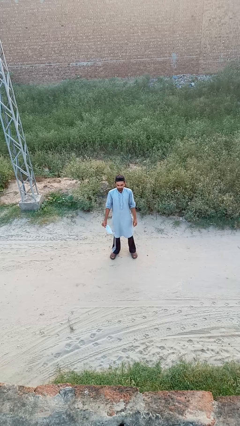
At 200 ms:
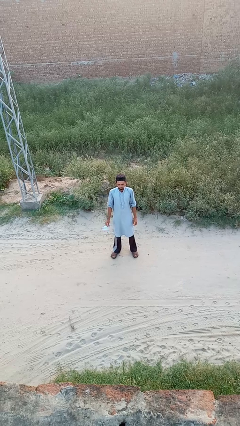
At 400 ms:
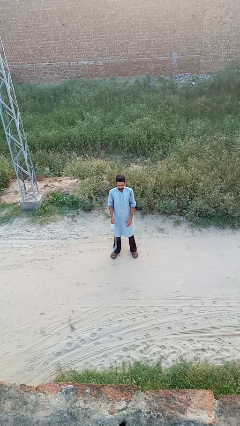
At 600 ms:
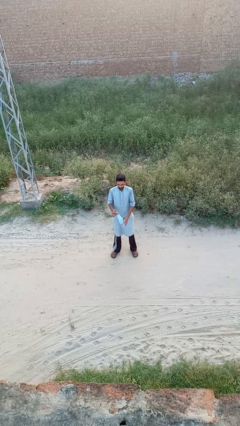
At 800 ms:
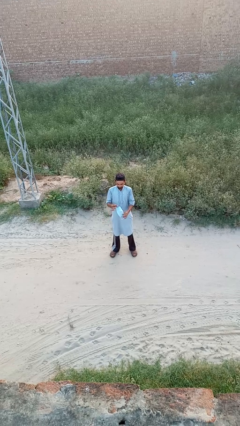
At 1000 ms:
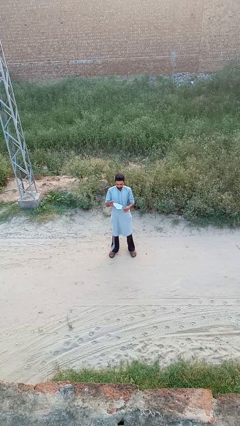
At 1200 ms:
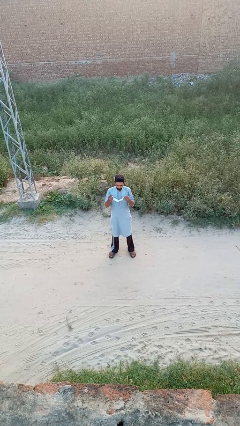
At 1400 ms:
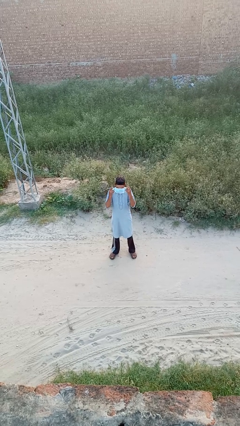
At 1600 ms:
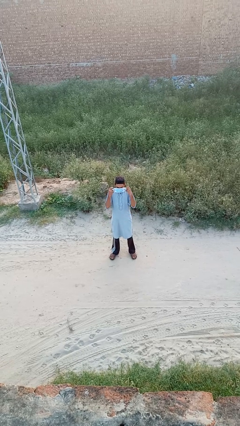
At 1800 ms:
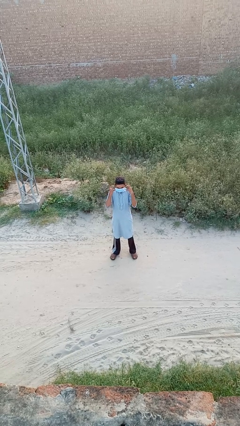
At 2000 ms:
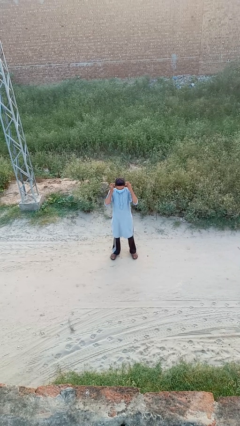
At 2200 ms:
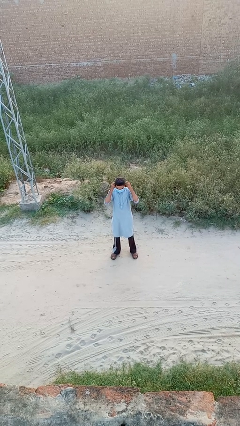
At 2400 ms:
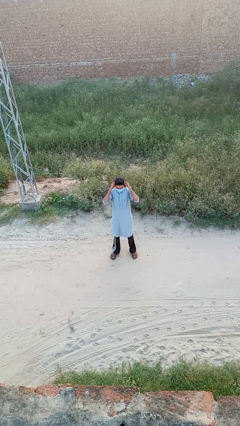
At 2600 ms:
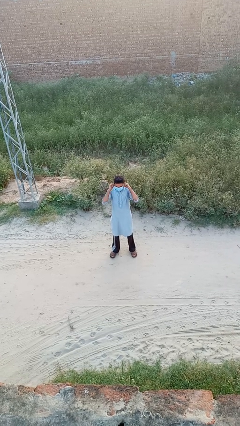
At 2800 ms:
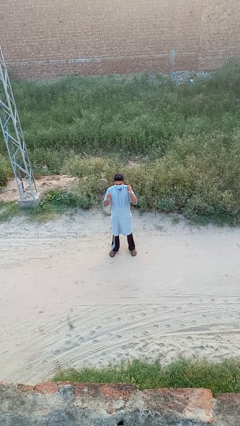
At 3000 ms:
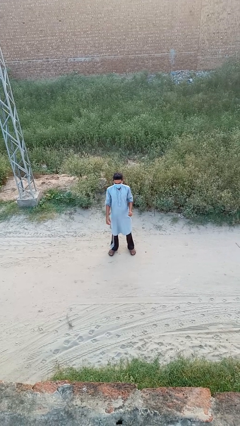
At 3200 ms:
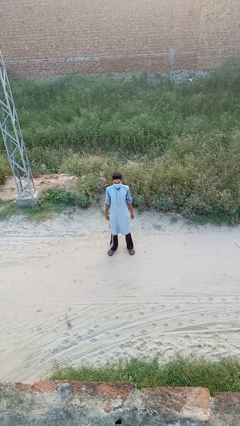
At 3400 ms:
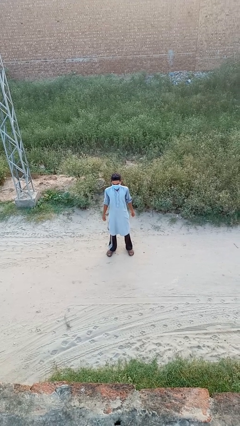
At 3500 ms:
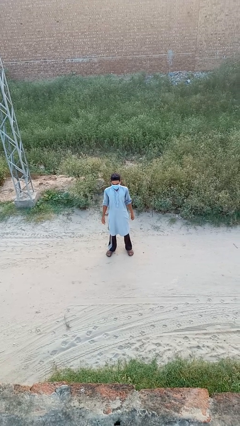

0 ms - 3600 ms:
person puts on facemask

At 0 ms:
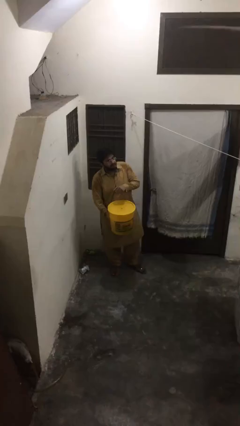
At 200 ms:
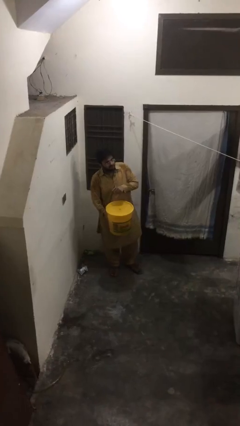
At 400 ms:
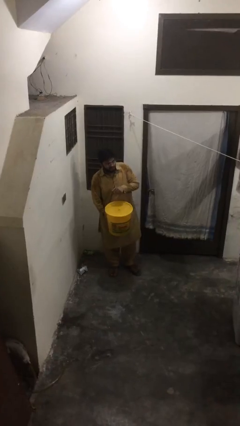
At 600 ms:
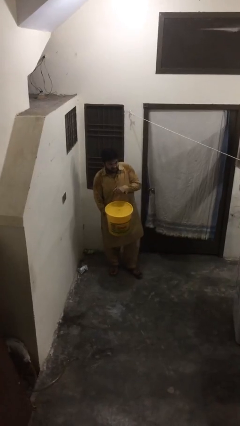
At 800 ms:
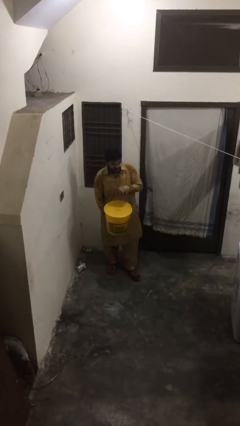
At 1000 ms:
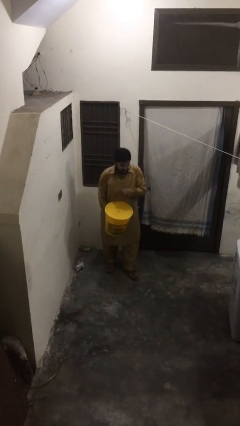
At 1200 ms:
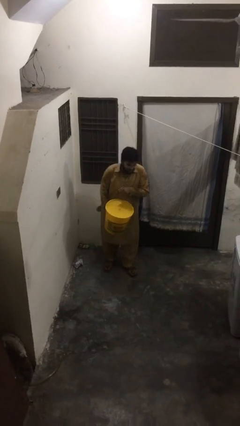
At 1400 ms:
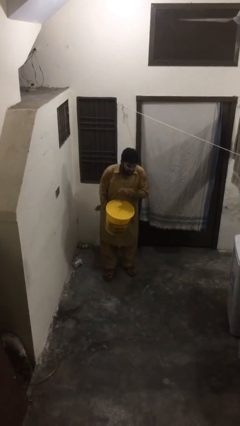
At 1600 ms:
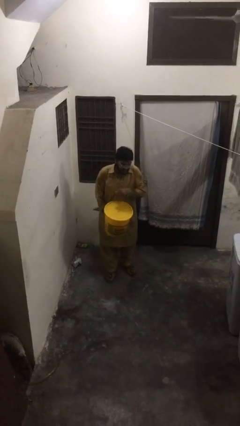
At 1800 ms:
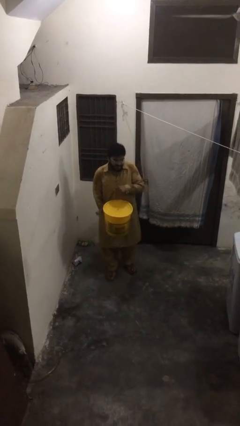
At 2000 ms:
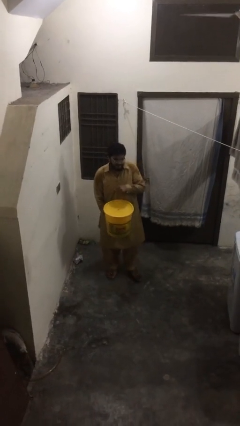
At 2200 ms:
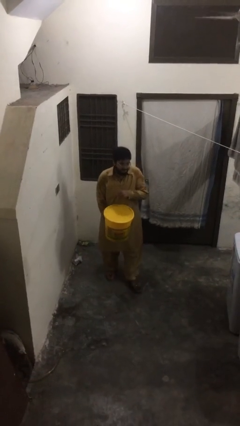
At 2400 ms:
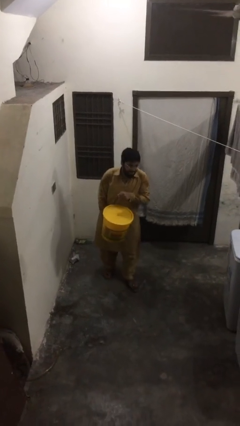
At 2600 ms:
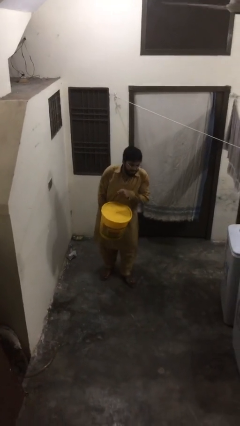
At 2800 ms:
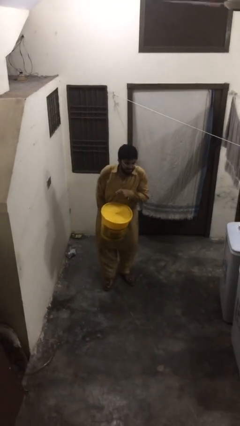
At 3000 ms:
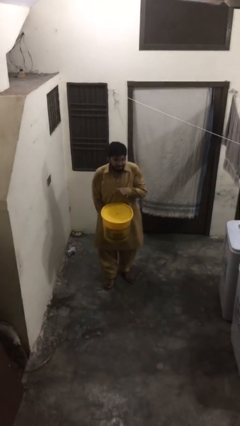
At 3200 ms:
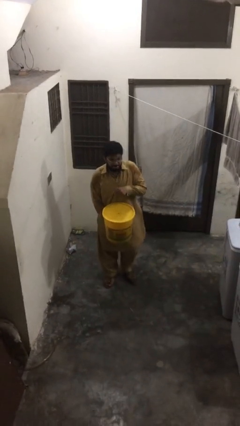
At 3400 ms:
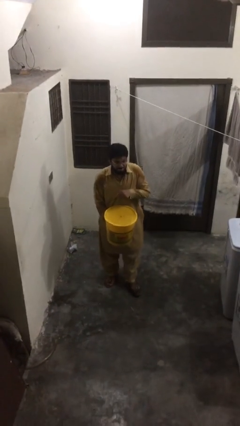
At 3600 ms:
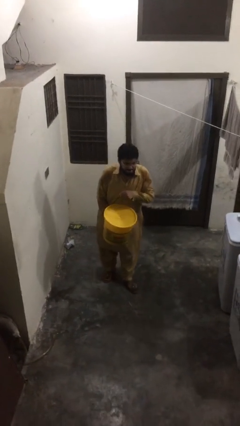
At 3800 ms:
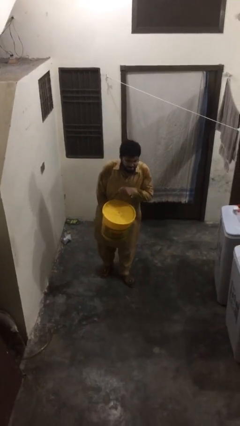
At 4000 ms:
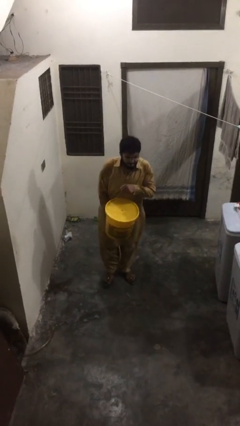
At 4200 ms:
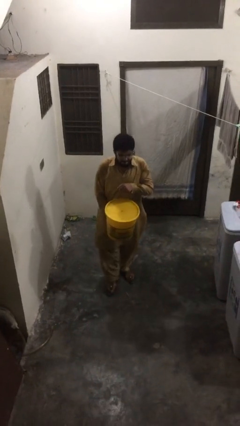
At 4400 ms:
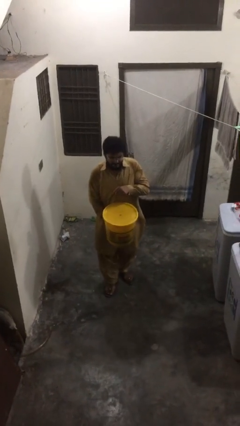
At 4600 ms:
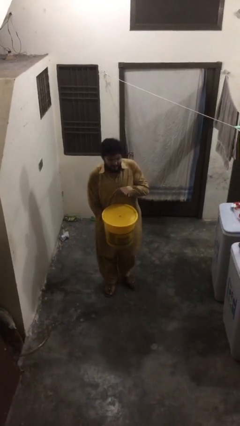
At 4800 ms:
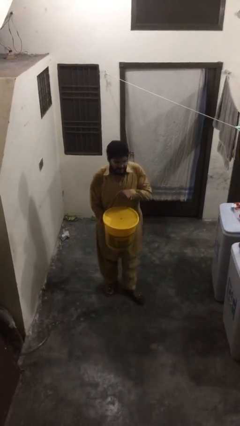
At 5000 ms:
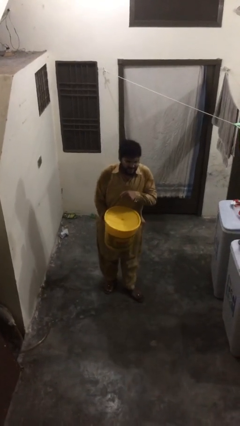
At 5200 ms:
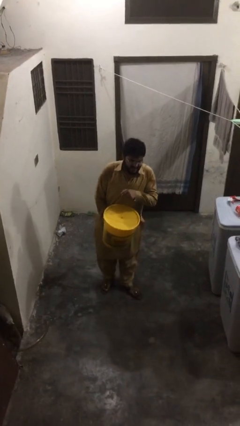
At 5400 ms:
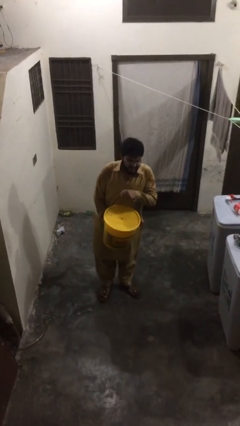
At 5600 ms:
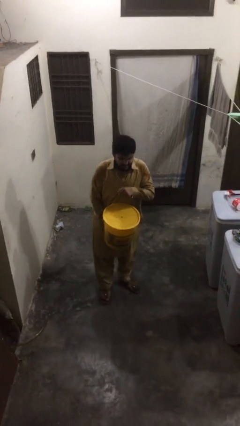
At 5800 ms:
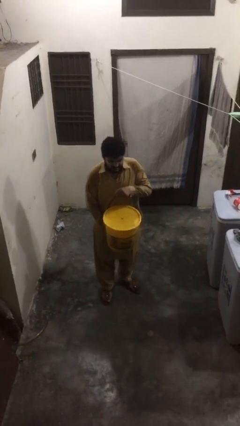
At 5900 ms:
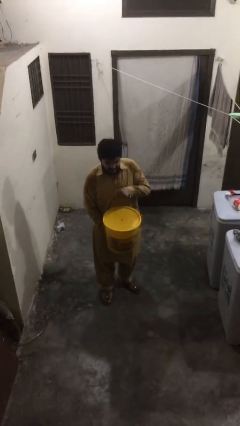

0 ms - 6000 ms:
person carries heavy object

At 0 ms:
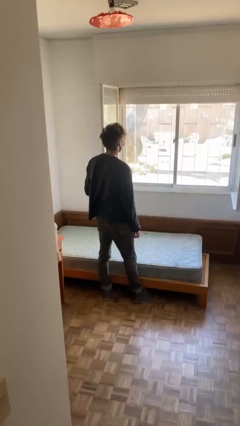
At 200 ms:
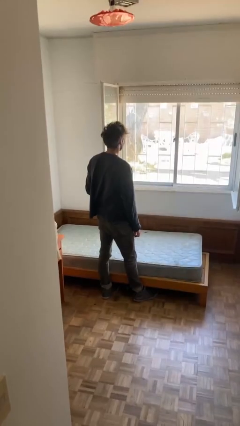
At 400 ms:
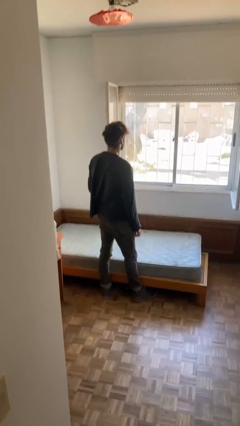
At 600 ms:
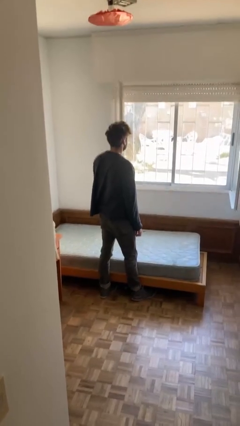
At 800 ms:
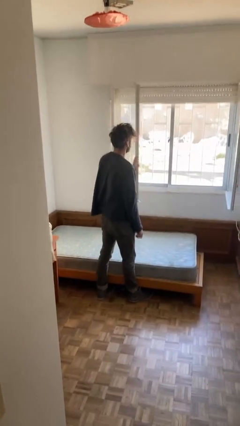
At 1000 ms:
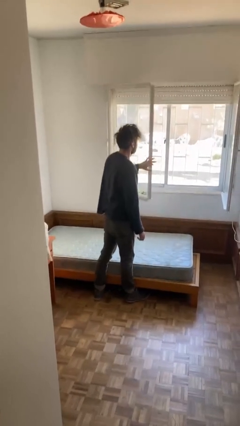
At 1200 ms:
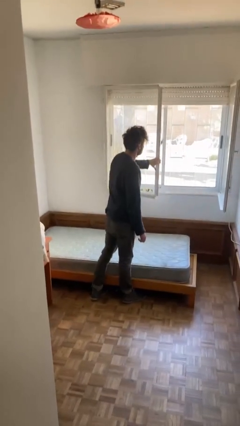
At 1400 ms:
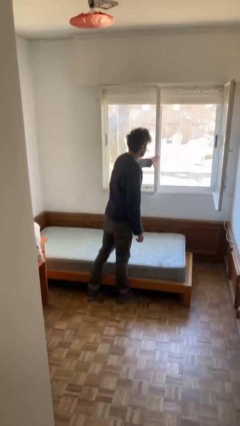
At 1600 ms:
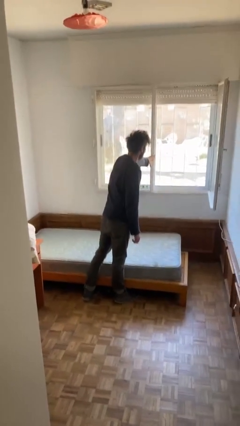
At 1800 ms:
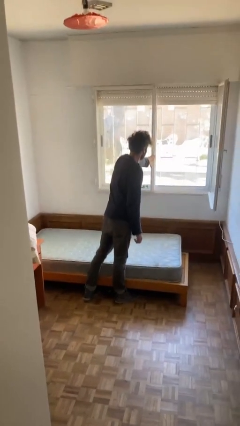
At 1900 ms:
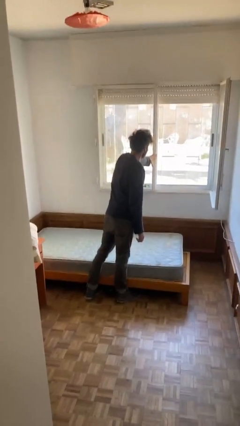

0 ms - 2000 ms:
person closes home window

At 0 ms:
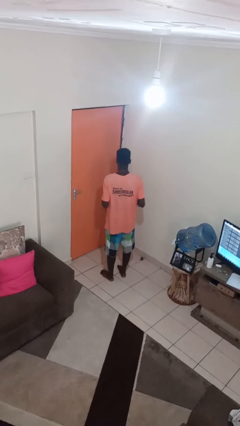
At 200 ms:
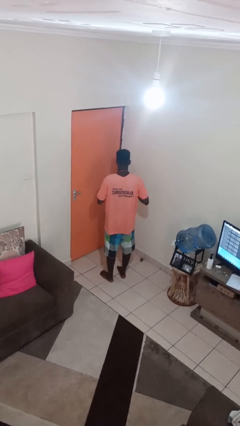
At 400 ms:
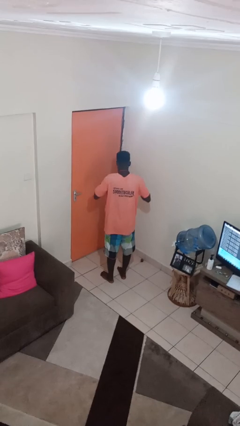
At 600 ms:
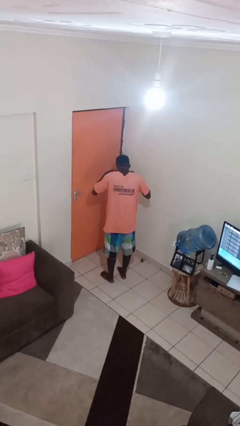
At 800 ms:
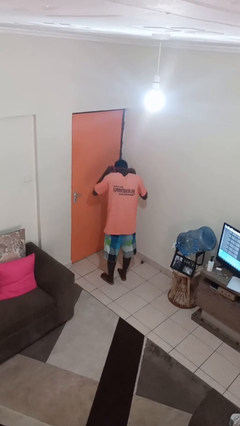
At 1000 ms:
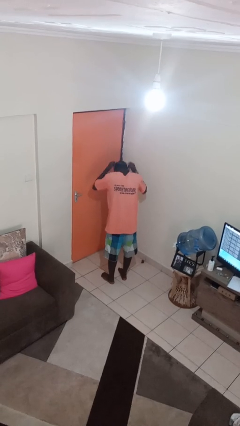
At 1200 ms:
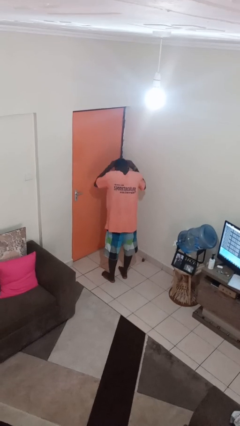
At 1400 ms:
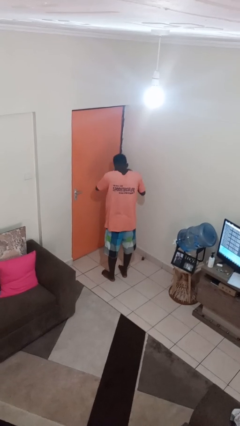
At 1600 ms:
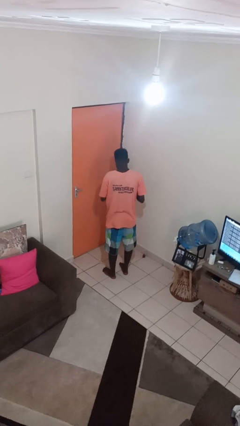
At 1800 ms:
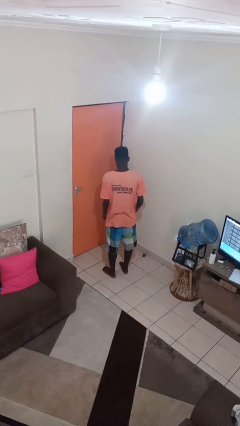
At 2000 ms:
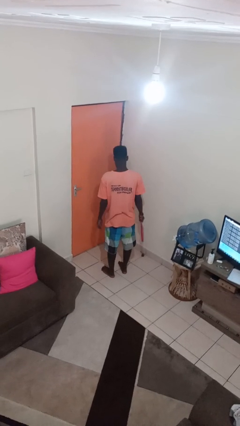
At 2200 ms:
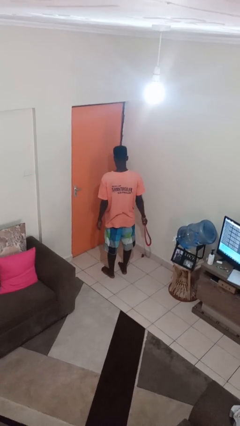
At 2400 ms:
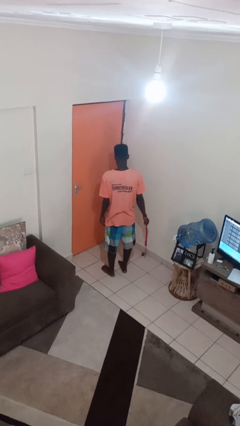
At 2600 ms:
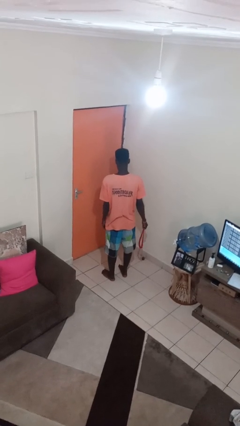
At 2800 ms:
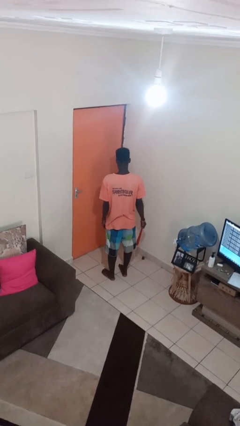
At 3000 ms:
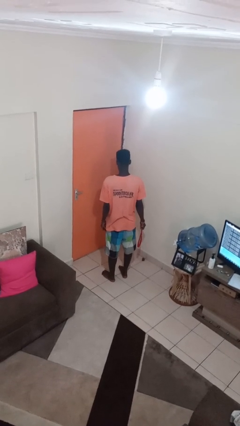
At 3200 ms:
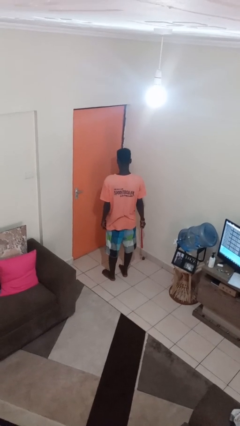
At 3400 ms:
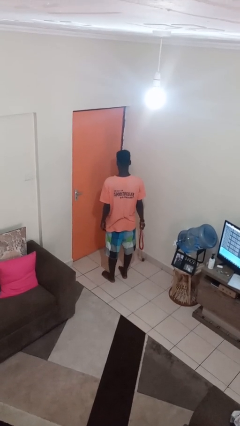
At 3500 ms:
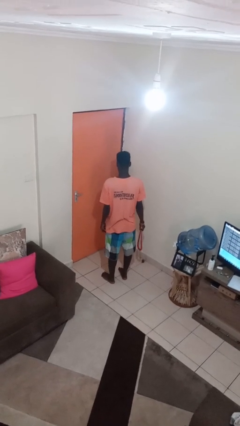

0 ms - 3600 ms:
person takes off necklace

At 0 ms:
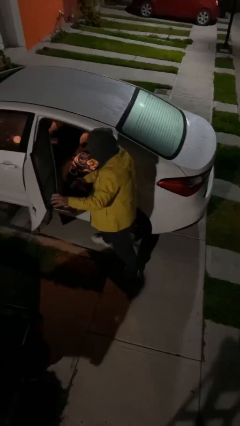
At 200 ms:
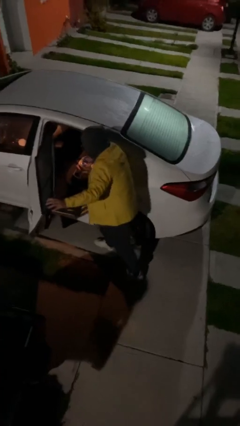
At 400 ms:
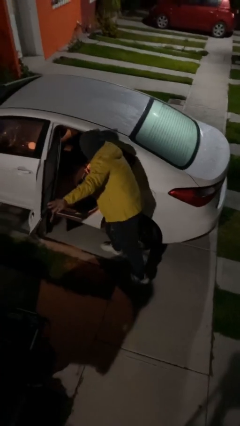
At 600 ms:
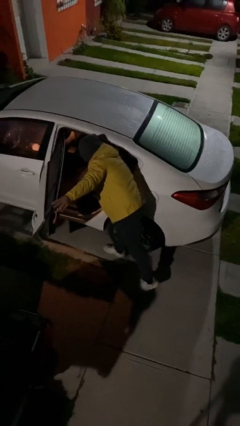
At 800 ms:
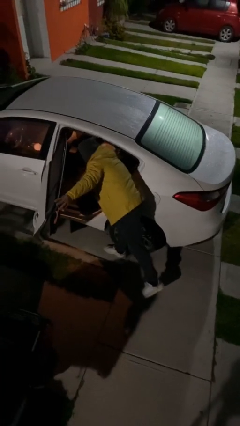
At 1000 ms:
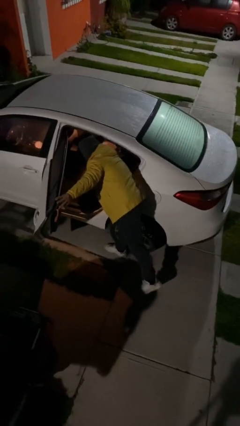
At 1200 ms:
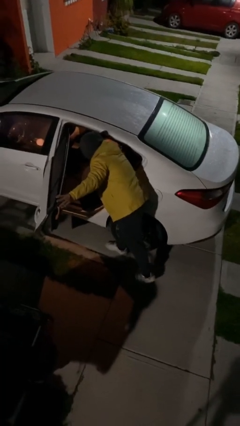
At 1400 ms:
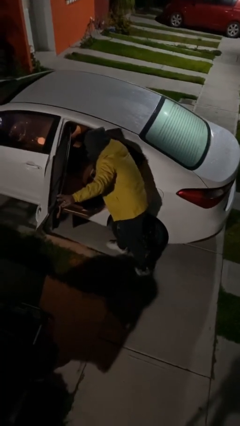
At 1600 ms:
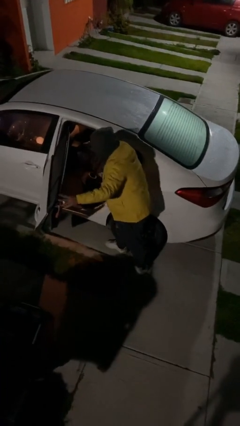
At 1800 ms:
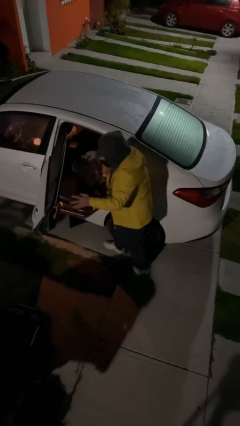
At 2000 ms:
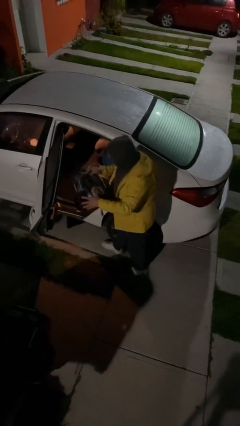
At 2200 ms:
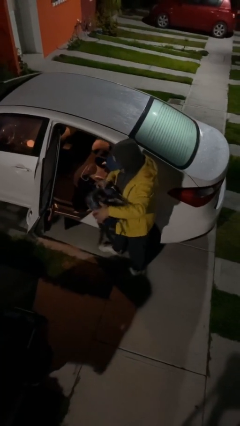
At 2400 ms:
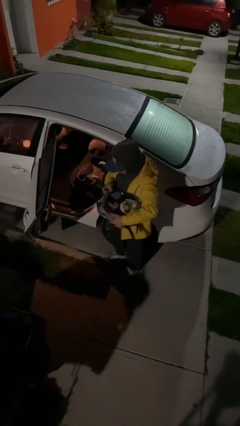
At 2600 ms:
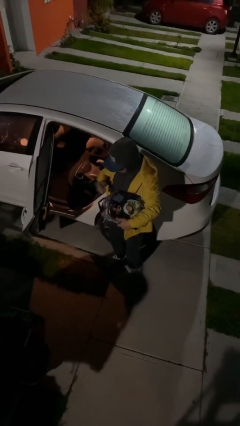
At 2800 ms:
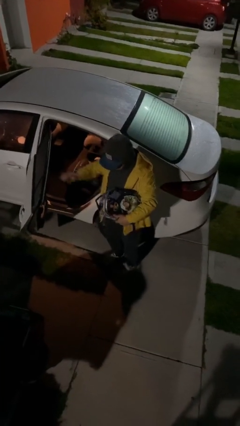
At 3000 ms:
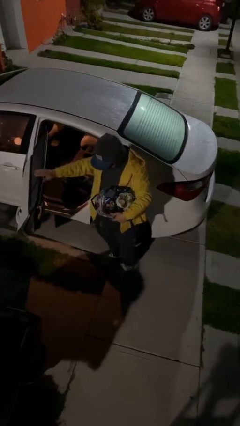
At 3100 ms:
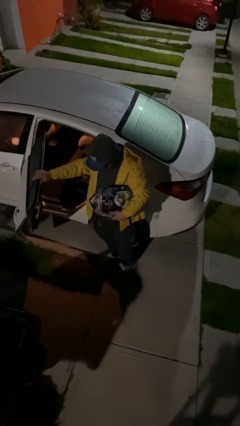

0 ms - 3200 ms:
person unloads car
